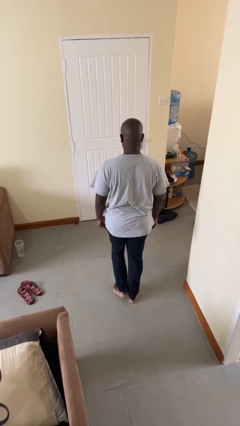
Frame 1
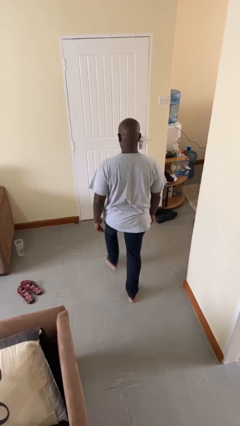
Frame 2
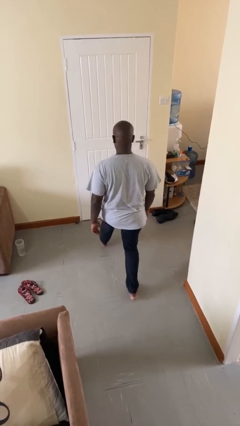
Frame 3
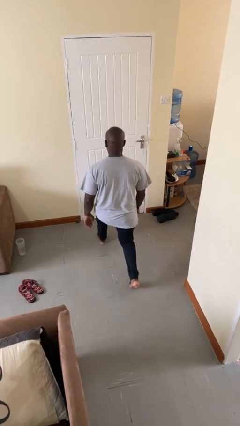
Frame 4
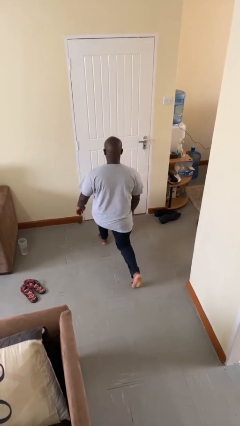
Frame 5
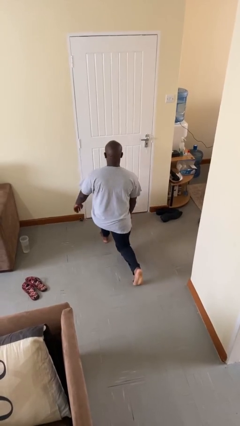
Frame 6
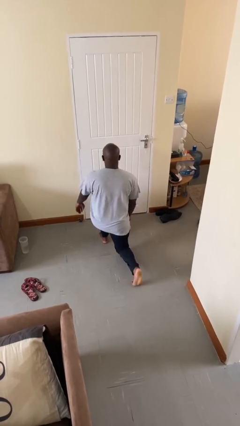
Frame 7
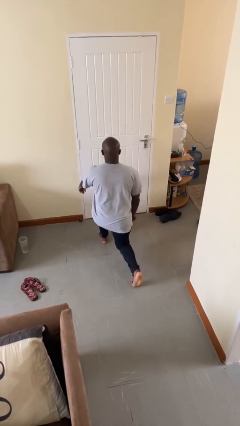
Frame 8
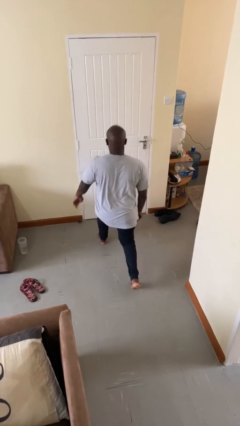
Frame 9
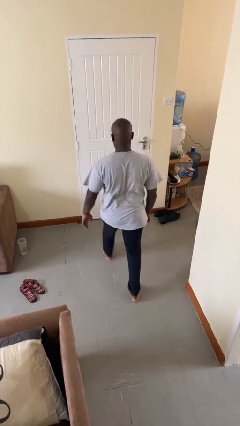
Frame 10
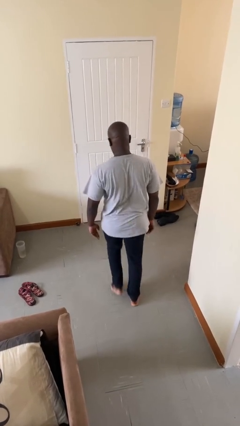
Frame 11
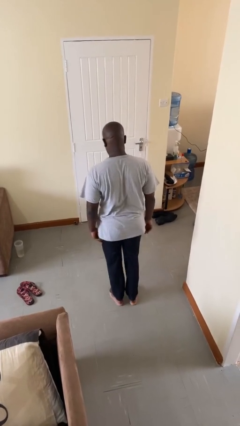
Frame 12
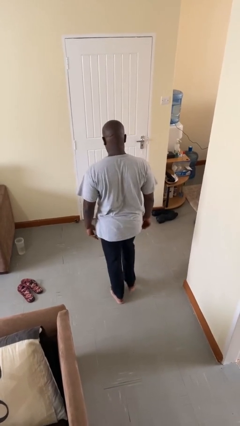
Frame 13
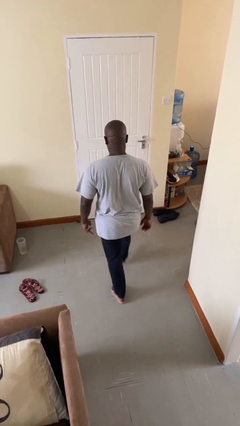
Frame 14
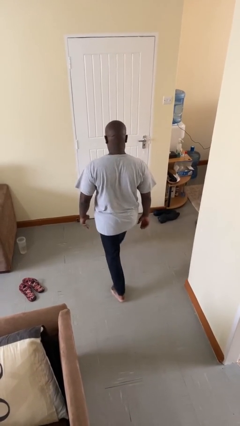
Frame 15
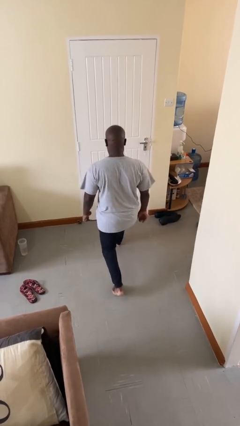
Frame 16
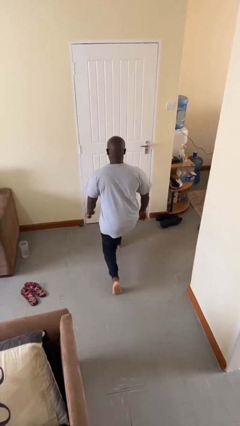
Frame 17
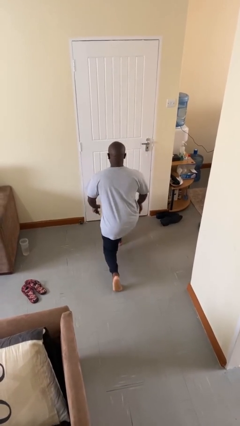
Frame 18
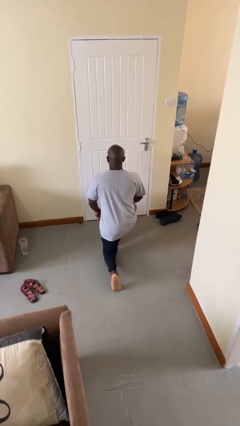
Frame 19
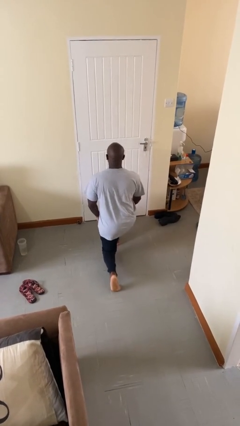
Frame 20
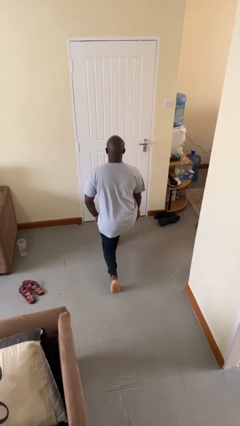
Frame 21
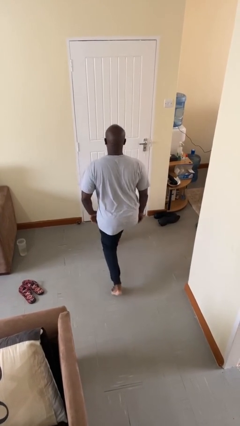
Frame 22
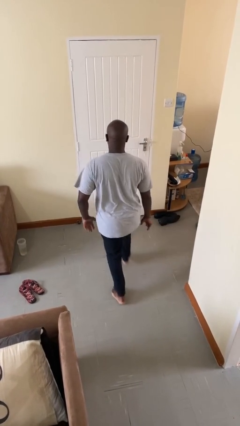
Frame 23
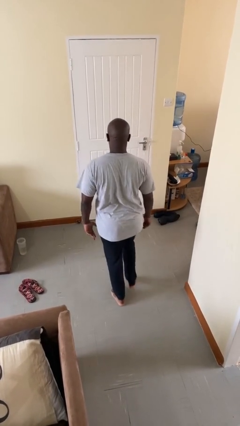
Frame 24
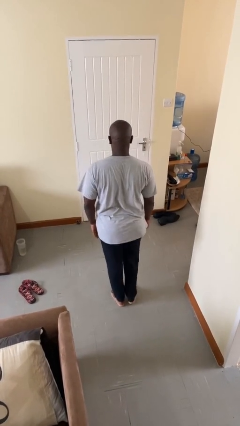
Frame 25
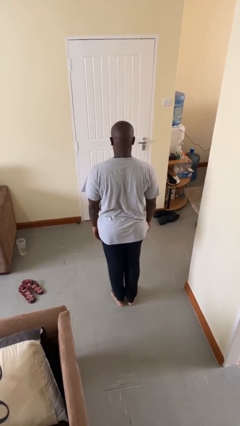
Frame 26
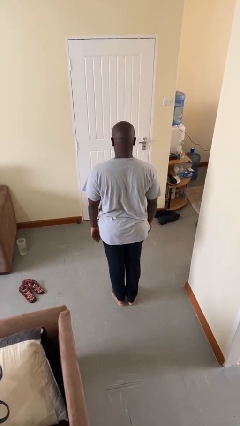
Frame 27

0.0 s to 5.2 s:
person exercises with lunges

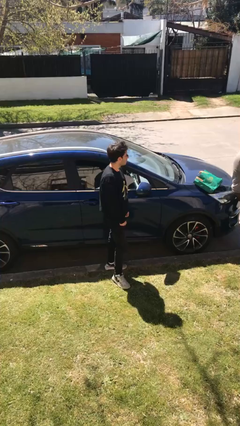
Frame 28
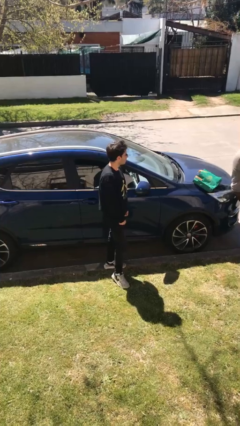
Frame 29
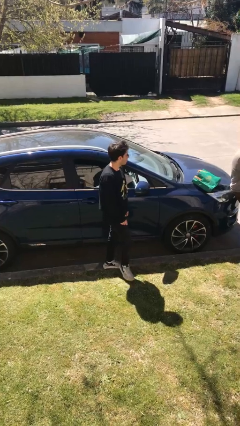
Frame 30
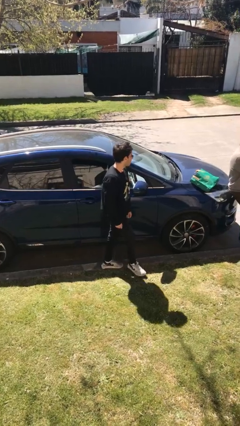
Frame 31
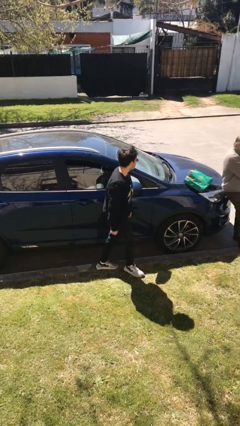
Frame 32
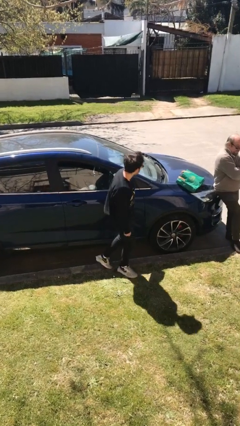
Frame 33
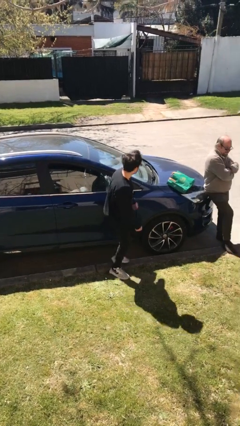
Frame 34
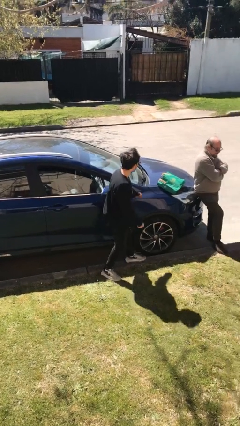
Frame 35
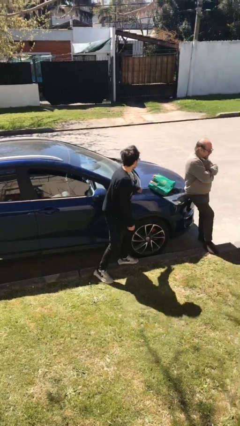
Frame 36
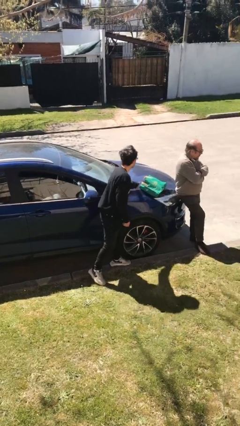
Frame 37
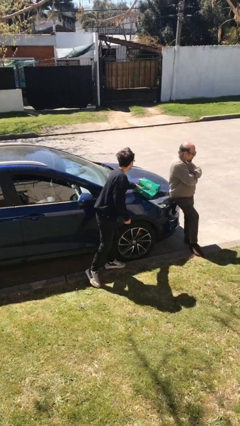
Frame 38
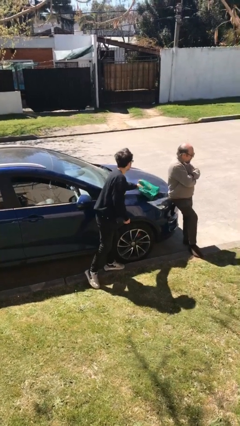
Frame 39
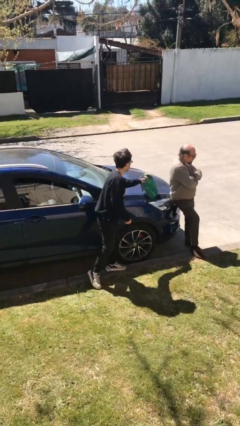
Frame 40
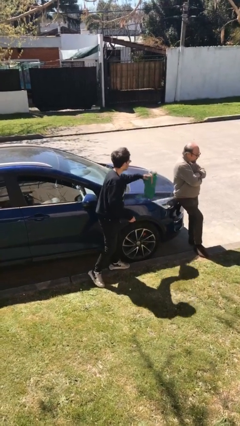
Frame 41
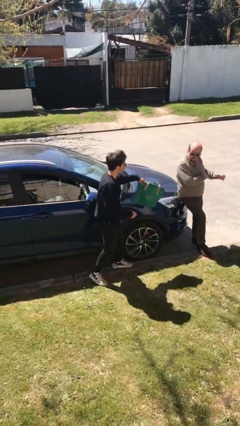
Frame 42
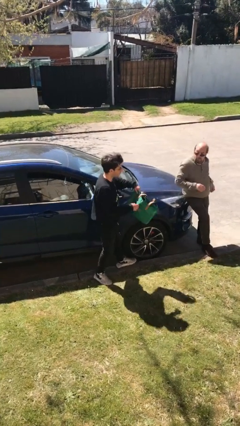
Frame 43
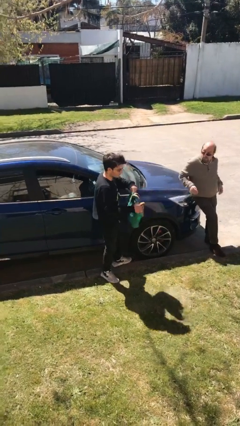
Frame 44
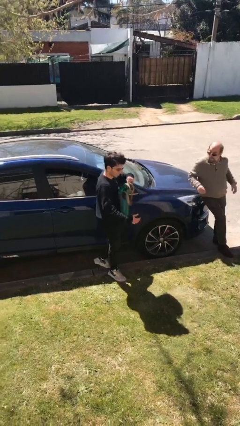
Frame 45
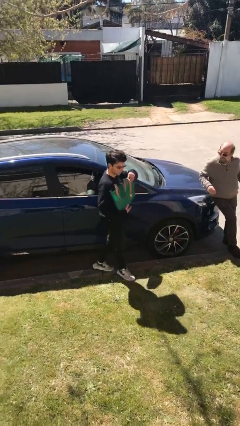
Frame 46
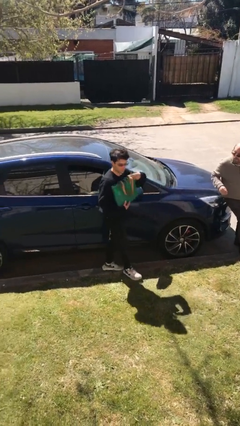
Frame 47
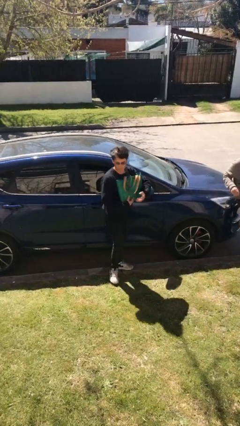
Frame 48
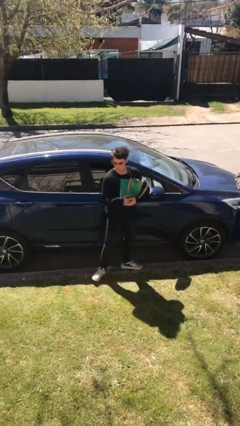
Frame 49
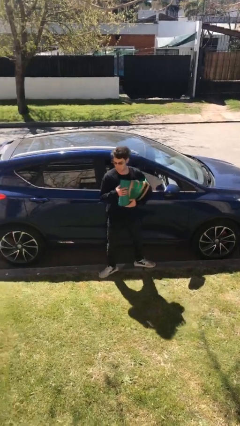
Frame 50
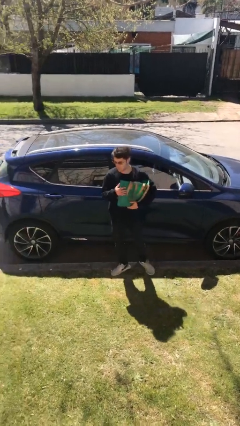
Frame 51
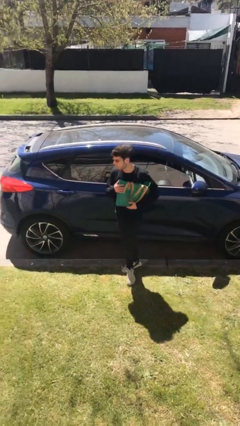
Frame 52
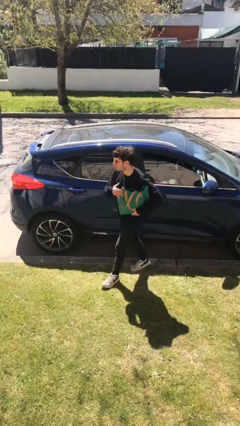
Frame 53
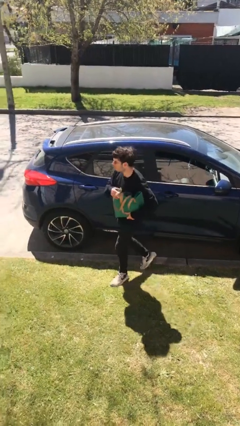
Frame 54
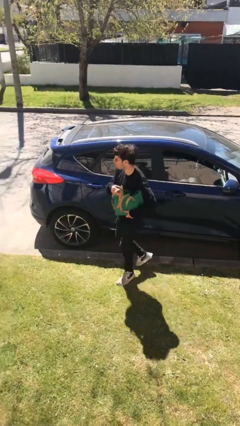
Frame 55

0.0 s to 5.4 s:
person steals object from person

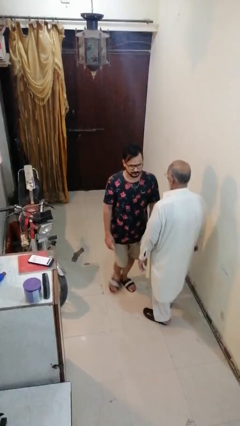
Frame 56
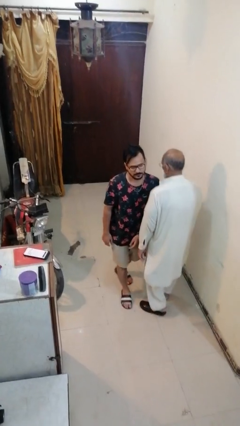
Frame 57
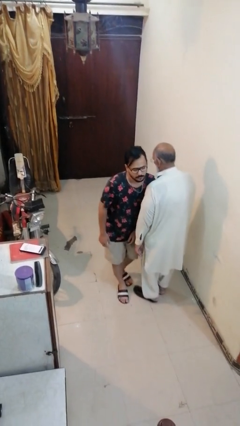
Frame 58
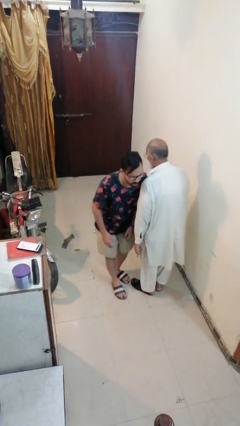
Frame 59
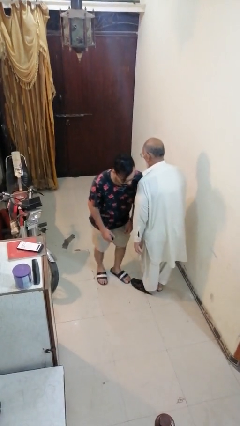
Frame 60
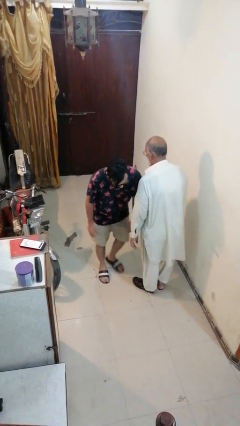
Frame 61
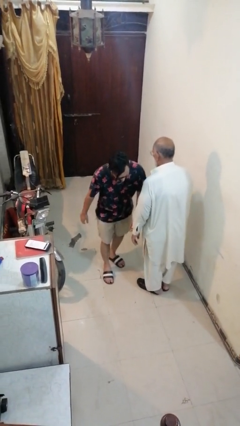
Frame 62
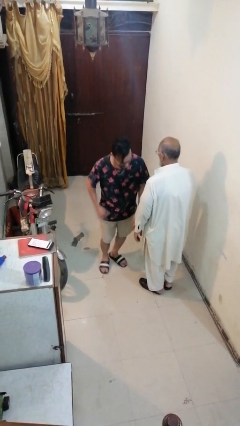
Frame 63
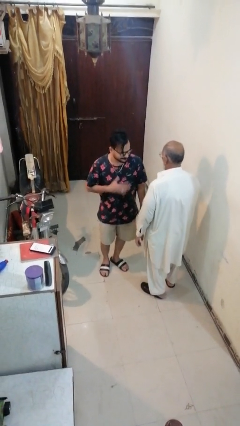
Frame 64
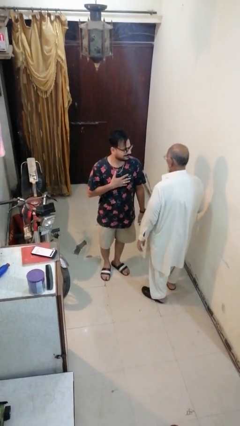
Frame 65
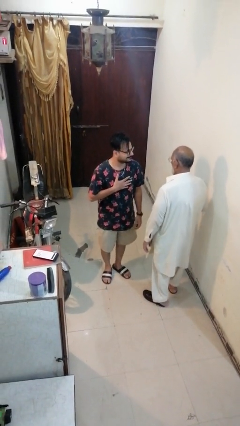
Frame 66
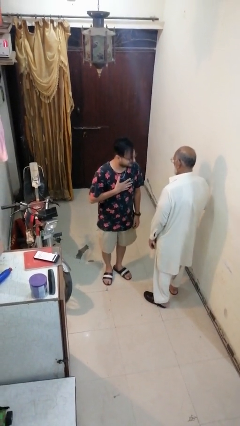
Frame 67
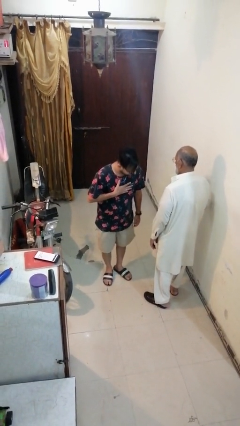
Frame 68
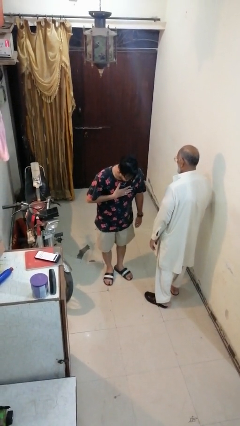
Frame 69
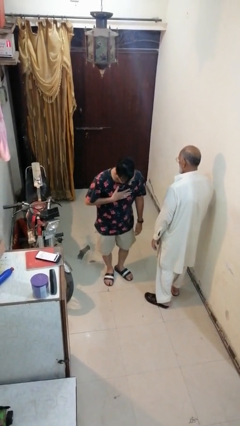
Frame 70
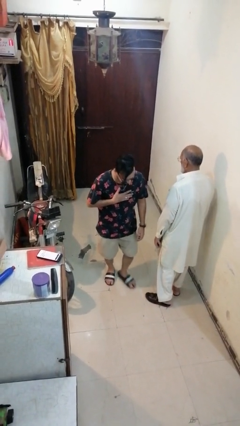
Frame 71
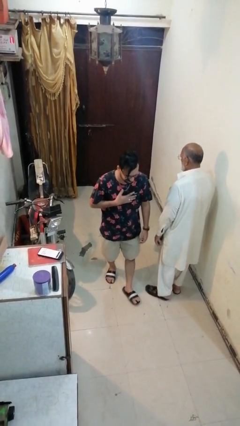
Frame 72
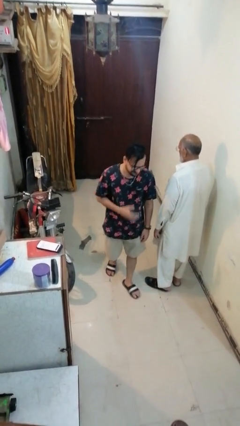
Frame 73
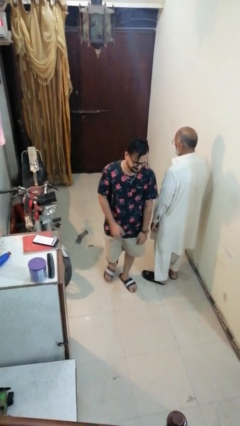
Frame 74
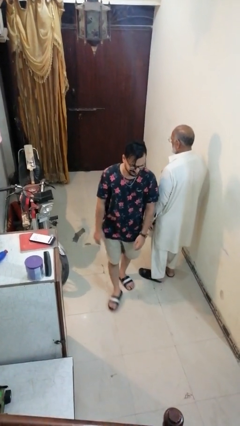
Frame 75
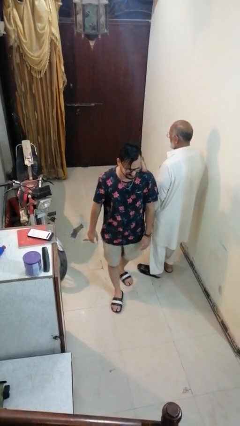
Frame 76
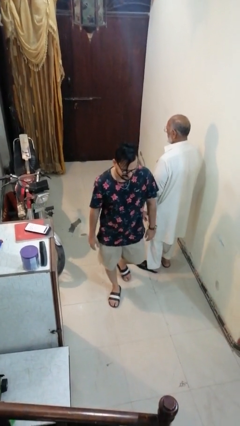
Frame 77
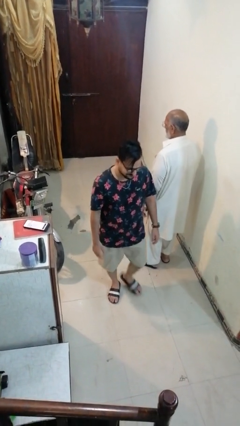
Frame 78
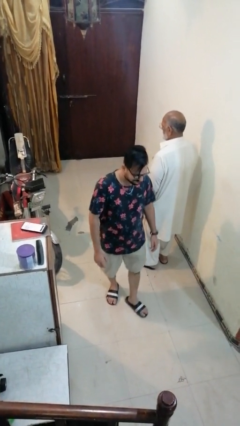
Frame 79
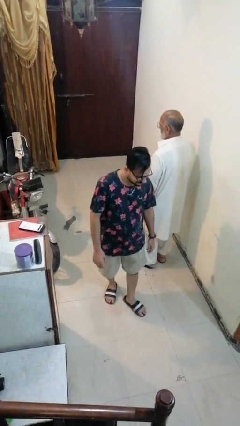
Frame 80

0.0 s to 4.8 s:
person bumps into person

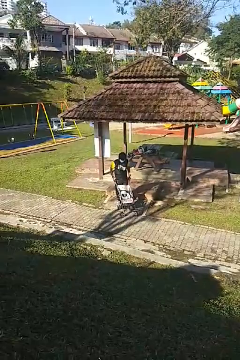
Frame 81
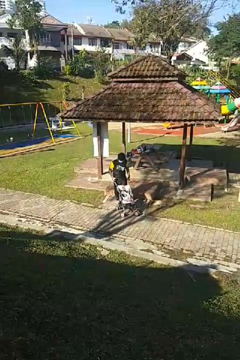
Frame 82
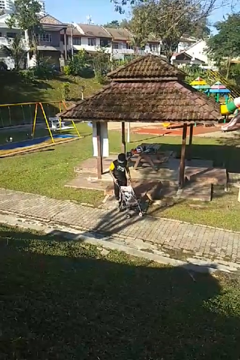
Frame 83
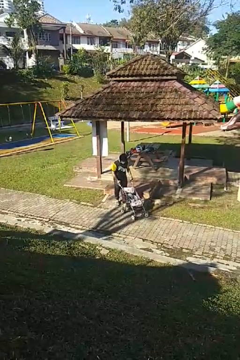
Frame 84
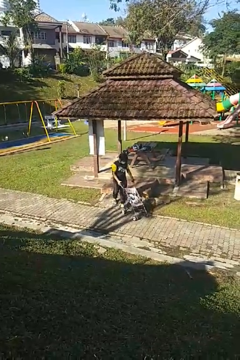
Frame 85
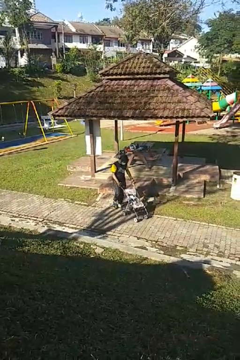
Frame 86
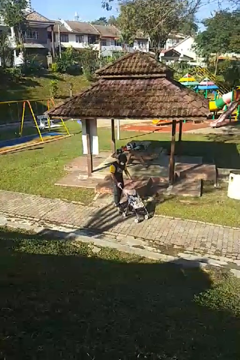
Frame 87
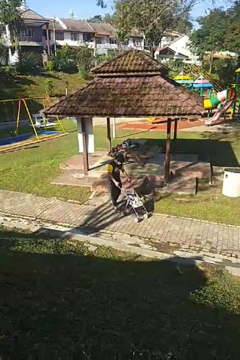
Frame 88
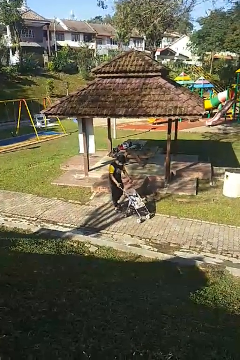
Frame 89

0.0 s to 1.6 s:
person pushes wheeled cart

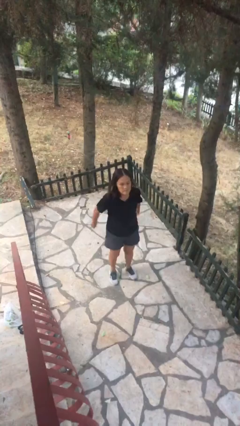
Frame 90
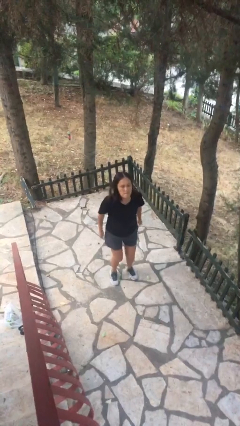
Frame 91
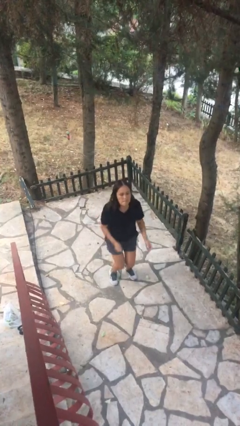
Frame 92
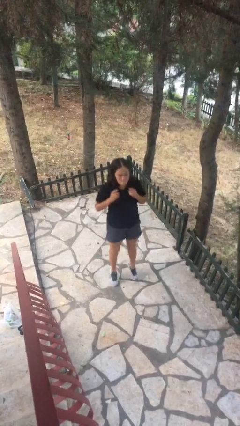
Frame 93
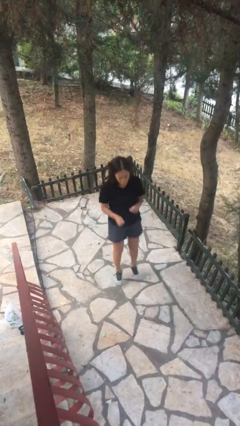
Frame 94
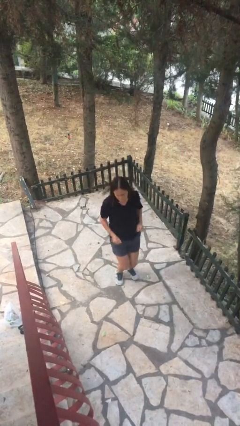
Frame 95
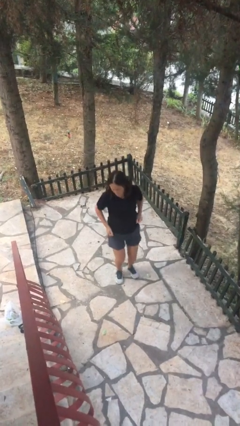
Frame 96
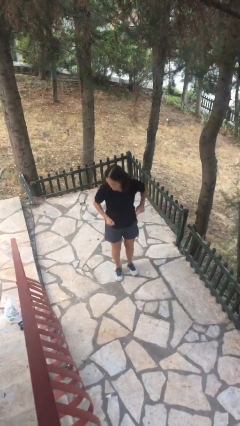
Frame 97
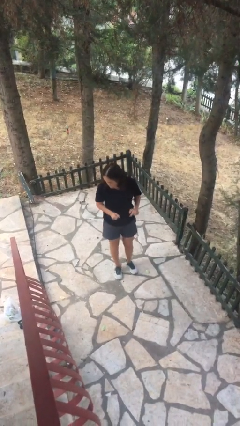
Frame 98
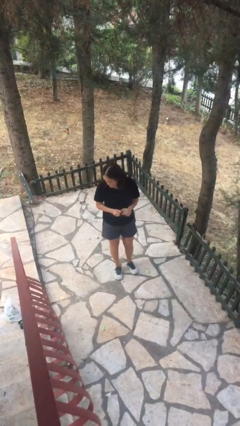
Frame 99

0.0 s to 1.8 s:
person jumps
